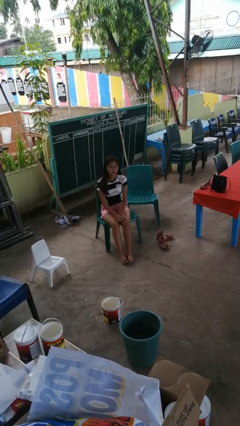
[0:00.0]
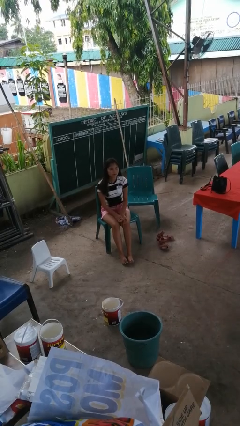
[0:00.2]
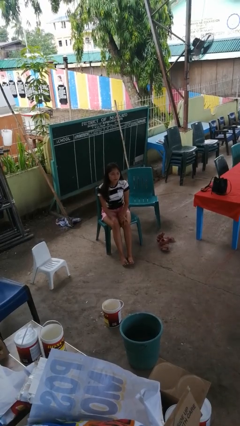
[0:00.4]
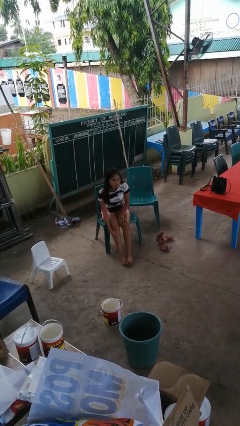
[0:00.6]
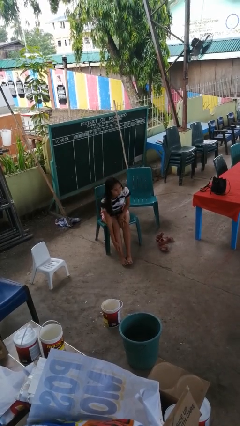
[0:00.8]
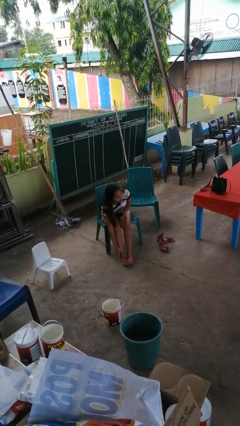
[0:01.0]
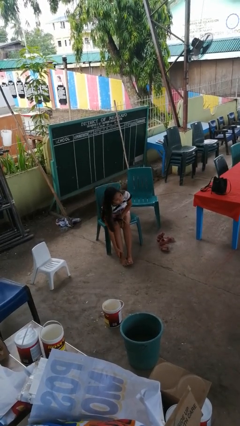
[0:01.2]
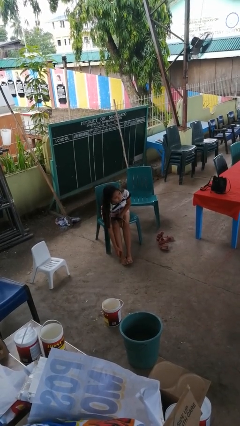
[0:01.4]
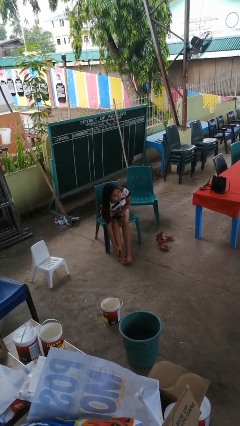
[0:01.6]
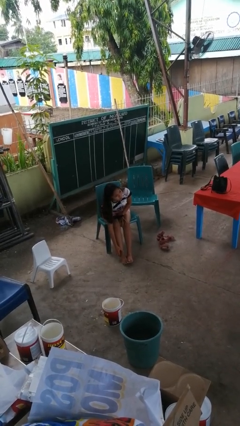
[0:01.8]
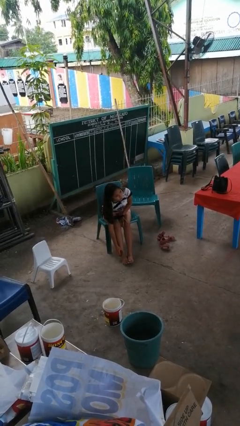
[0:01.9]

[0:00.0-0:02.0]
person rubs foot

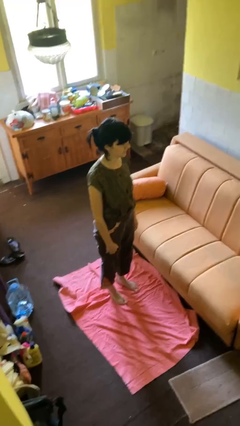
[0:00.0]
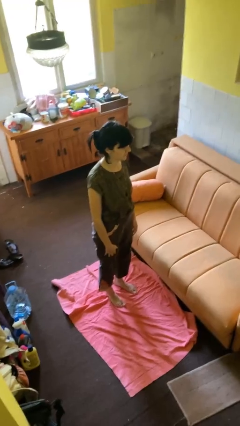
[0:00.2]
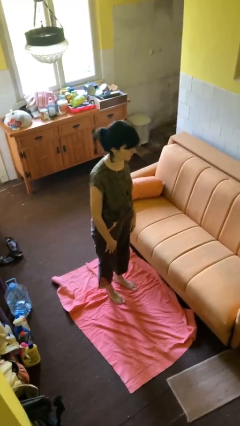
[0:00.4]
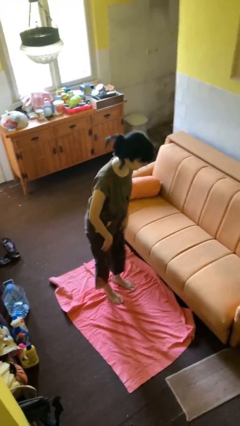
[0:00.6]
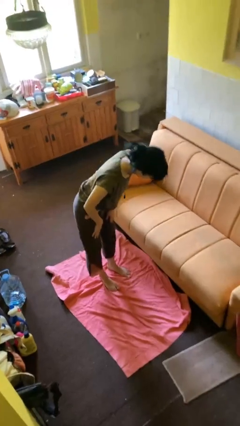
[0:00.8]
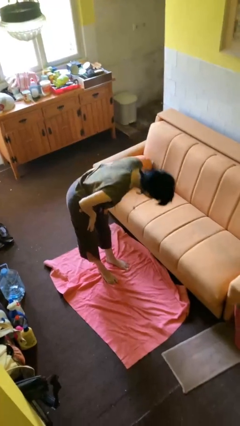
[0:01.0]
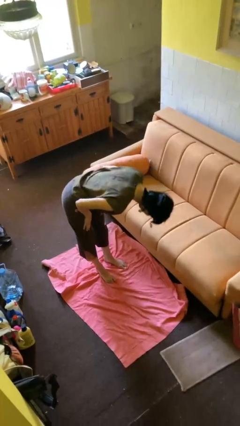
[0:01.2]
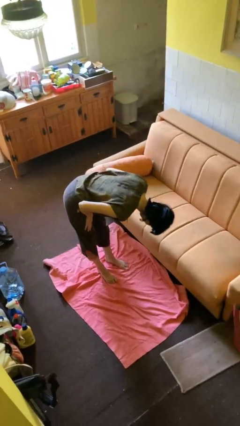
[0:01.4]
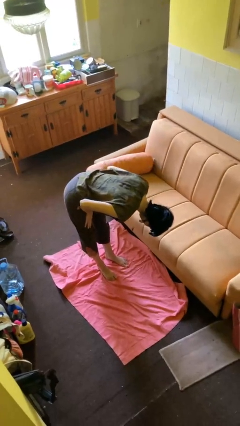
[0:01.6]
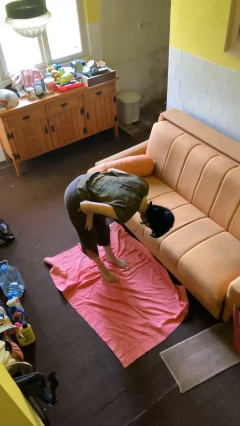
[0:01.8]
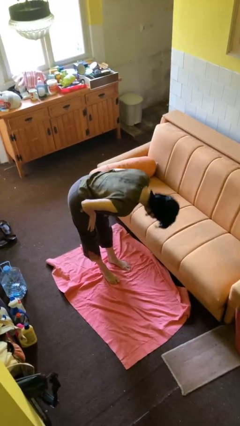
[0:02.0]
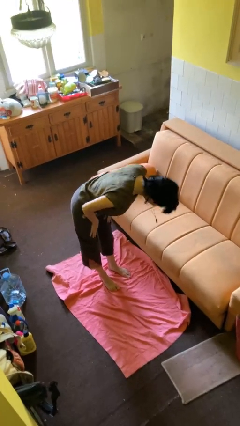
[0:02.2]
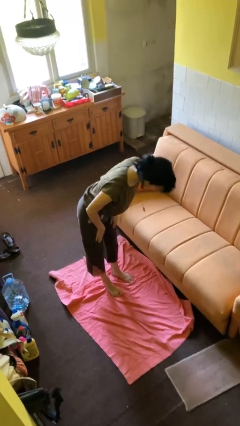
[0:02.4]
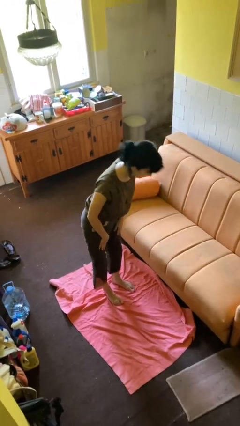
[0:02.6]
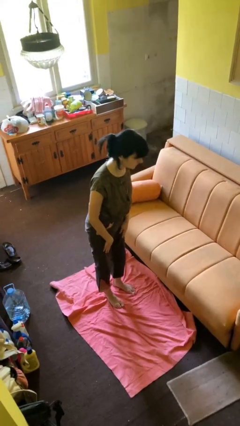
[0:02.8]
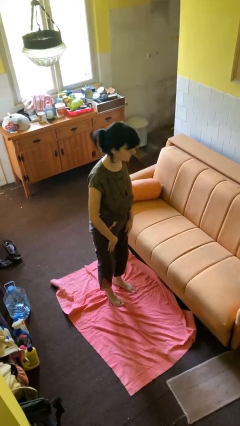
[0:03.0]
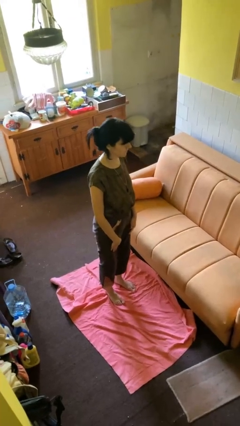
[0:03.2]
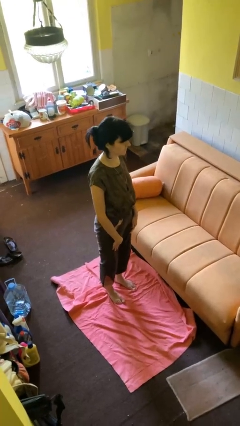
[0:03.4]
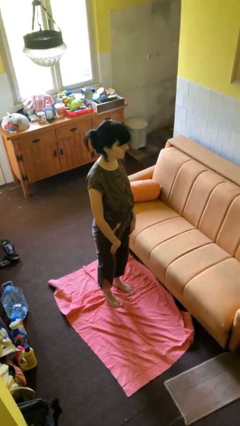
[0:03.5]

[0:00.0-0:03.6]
person bows

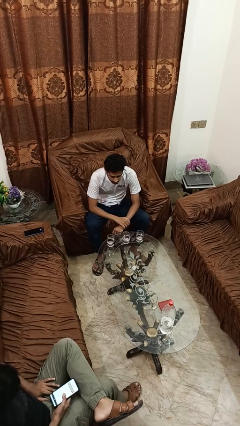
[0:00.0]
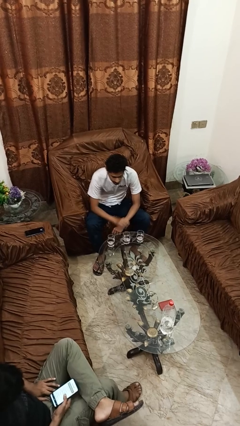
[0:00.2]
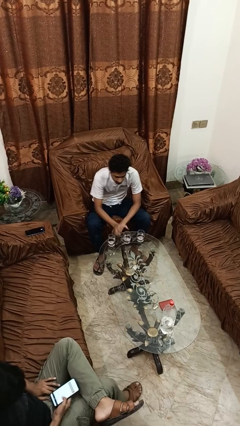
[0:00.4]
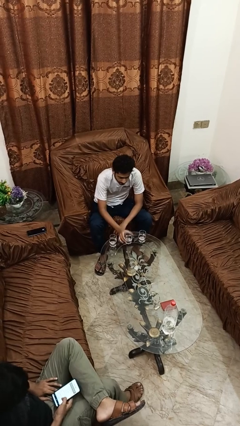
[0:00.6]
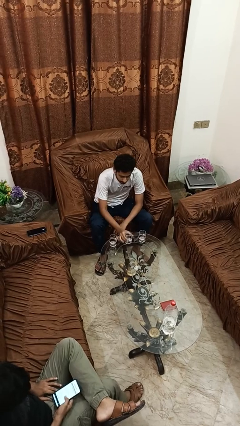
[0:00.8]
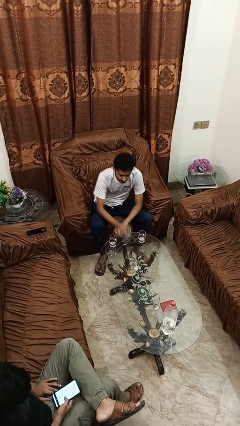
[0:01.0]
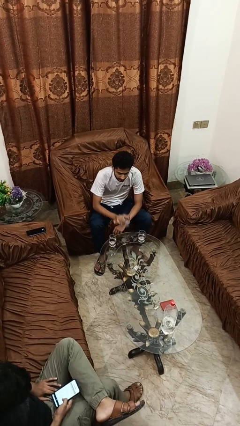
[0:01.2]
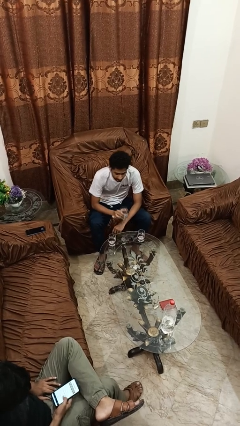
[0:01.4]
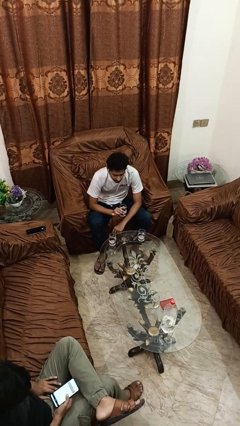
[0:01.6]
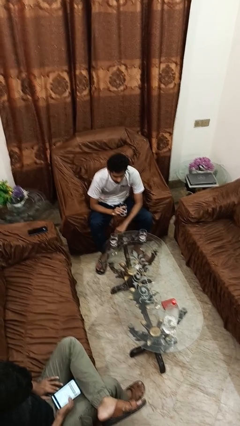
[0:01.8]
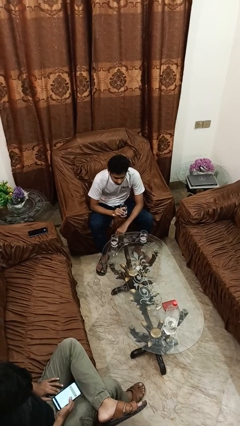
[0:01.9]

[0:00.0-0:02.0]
person picks up object from table

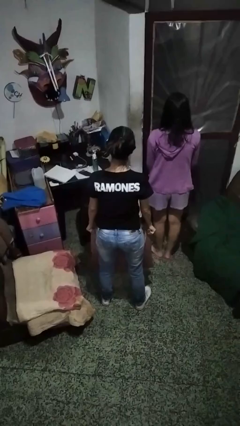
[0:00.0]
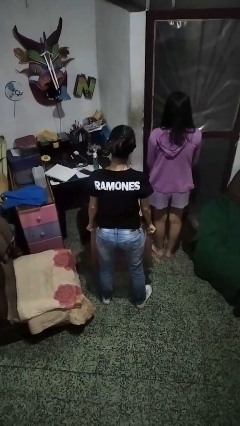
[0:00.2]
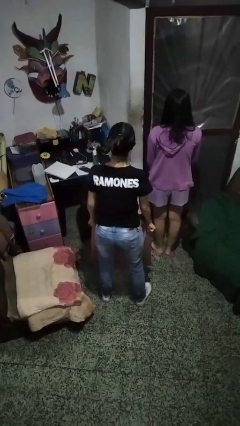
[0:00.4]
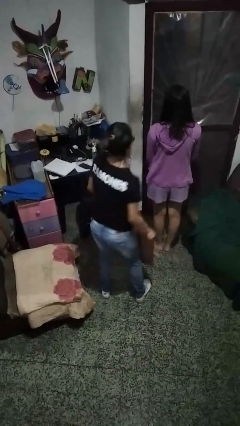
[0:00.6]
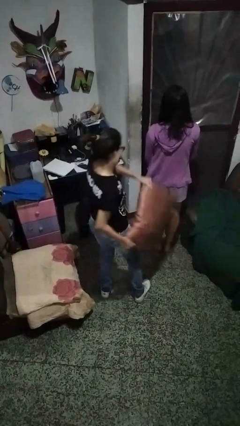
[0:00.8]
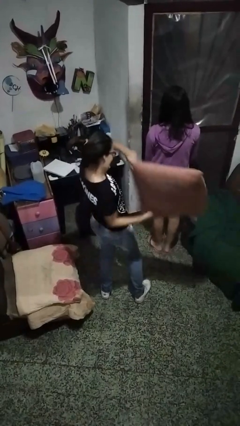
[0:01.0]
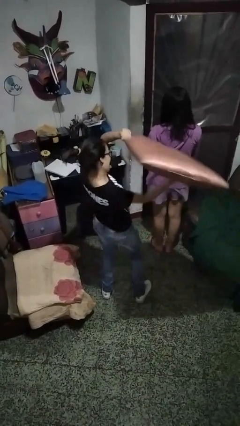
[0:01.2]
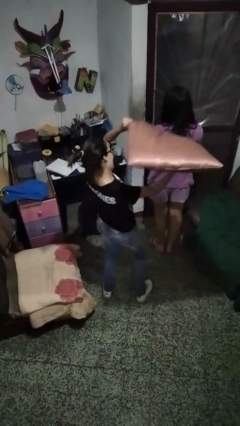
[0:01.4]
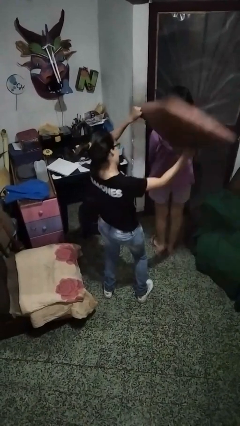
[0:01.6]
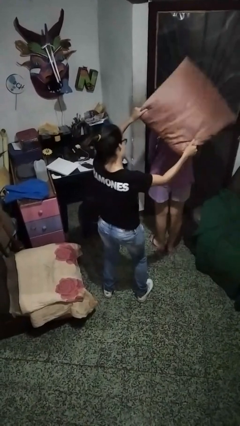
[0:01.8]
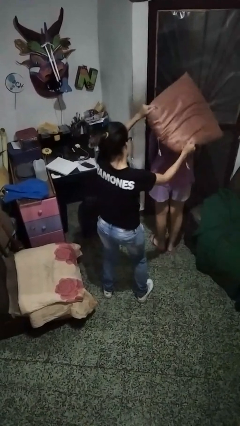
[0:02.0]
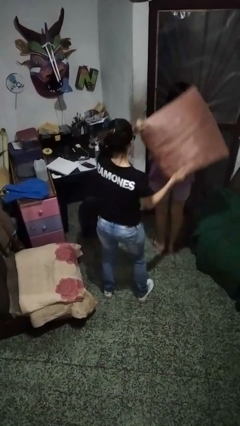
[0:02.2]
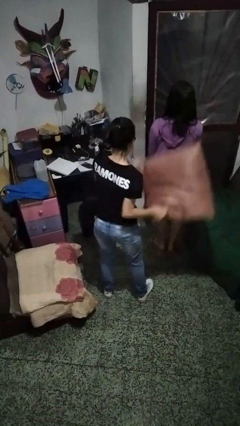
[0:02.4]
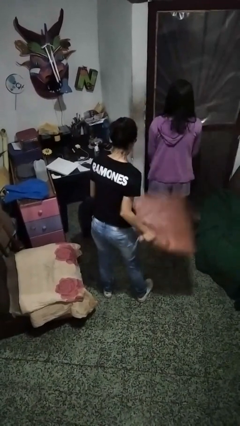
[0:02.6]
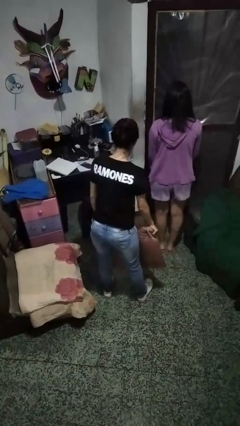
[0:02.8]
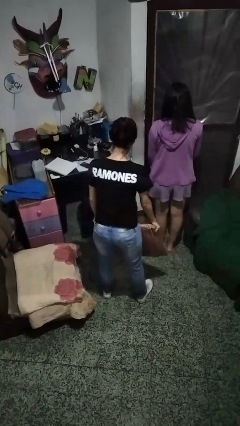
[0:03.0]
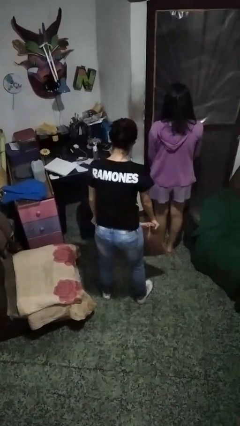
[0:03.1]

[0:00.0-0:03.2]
person hits person with pillow

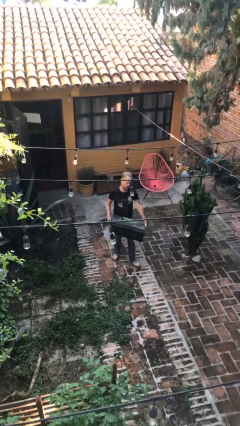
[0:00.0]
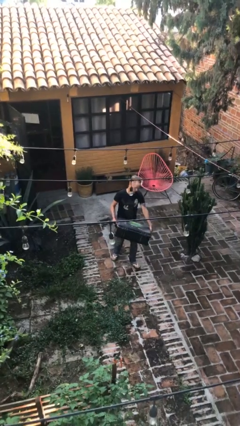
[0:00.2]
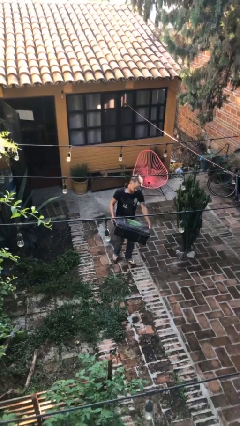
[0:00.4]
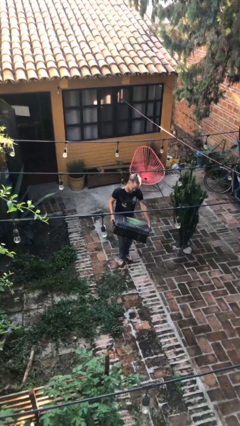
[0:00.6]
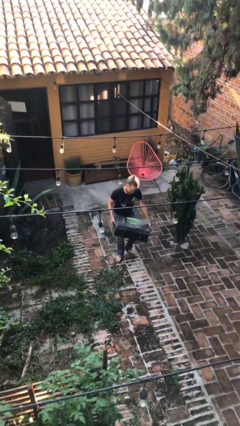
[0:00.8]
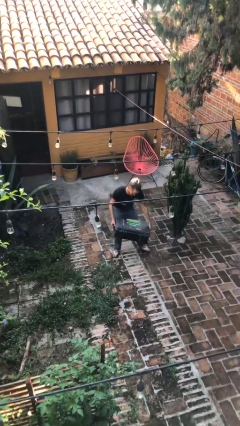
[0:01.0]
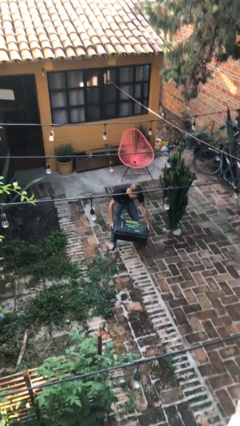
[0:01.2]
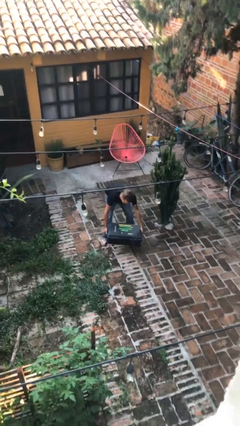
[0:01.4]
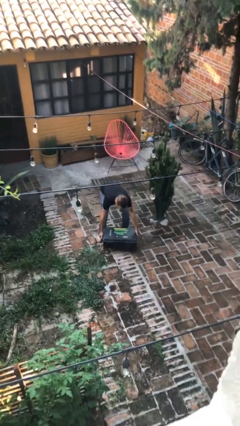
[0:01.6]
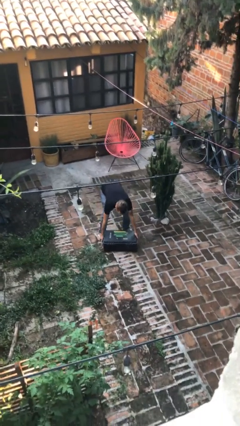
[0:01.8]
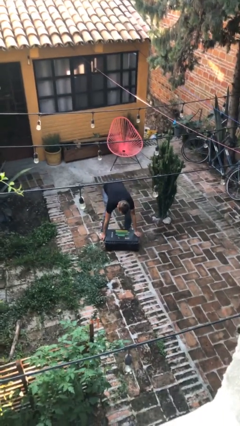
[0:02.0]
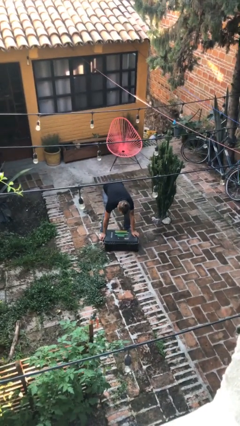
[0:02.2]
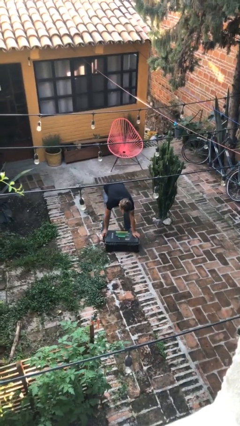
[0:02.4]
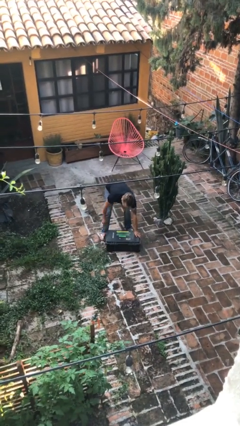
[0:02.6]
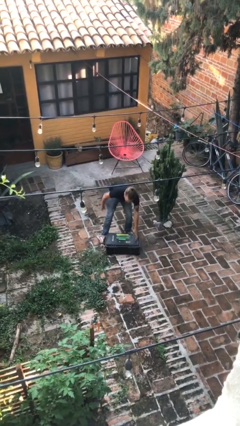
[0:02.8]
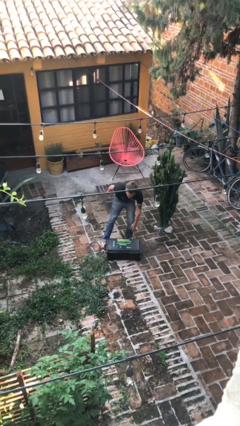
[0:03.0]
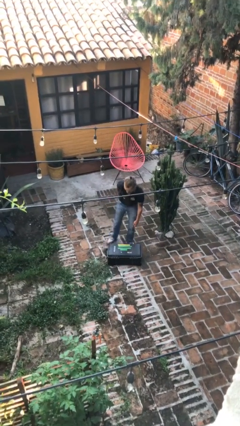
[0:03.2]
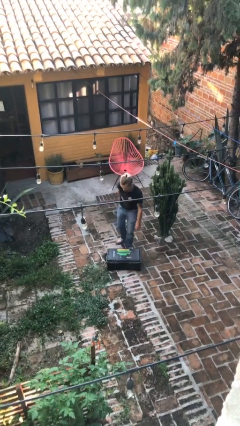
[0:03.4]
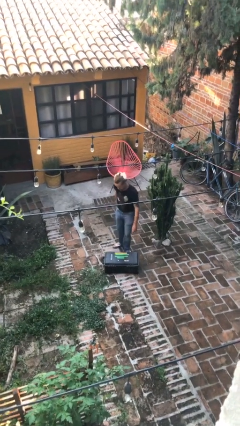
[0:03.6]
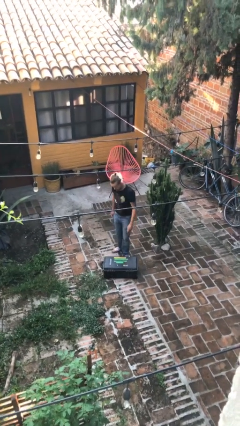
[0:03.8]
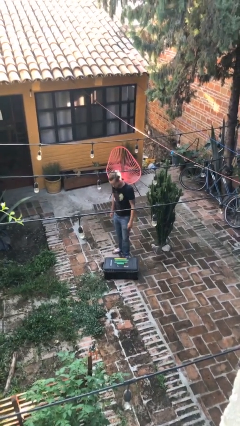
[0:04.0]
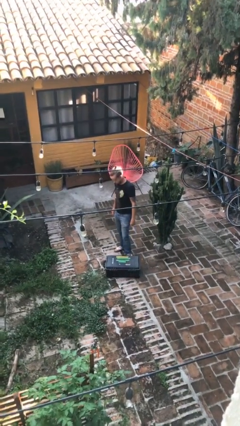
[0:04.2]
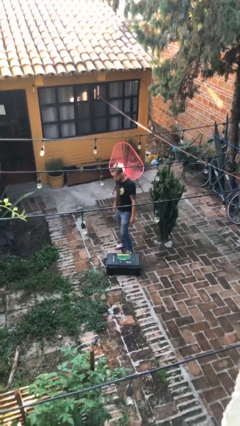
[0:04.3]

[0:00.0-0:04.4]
person puts down object on floor

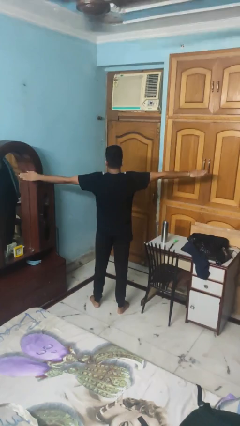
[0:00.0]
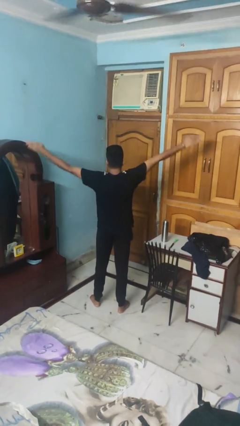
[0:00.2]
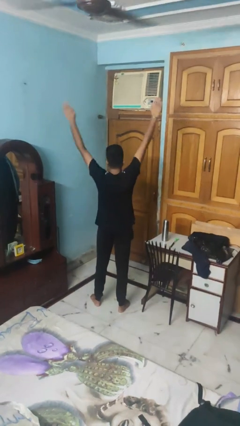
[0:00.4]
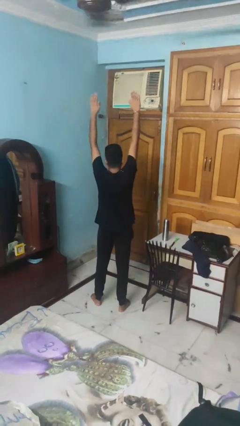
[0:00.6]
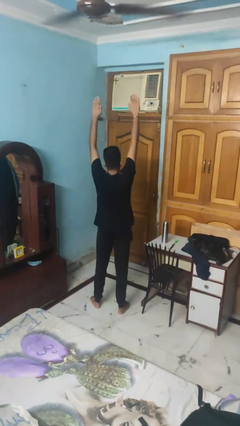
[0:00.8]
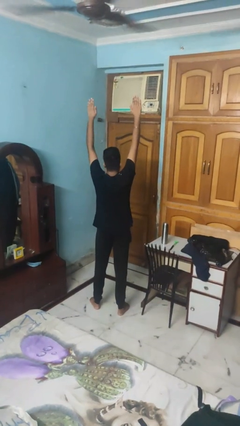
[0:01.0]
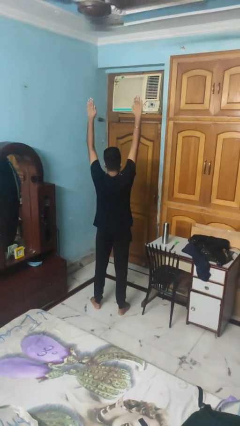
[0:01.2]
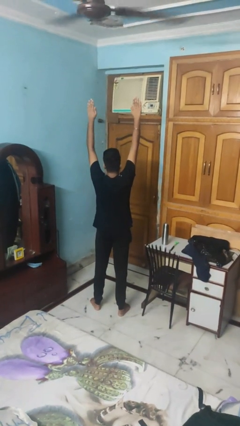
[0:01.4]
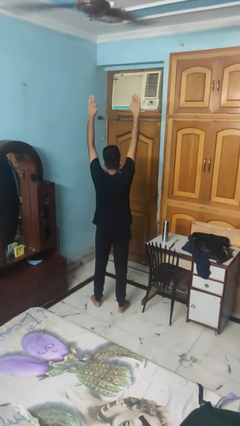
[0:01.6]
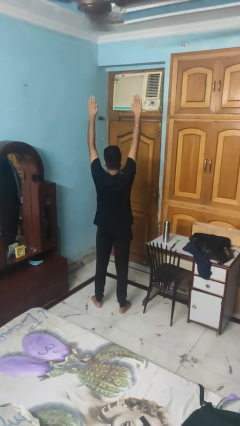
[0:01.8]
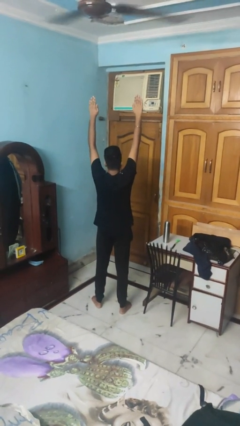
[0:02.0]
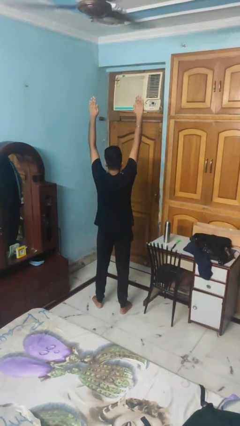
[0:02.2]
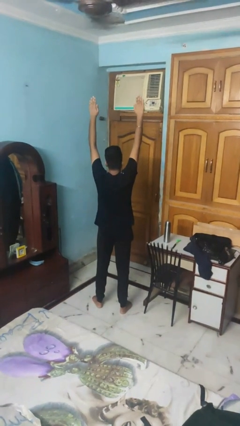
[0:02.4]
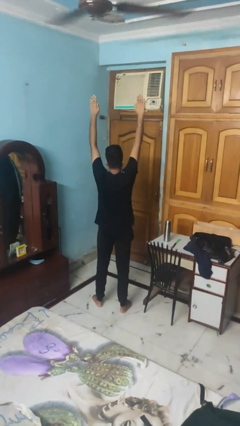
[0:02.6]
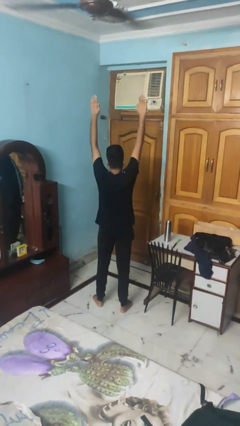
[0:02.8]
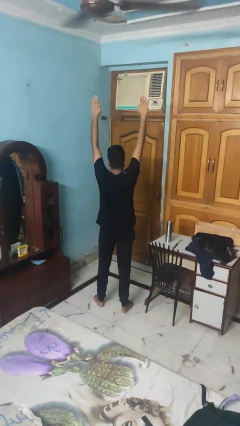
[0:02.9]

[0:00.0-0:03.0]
person stretches arms over head
